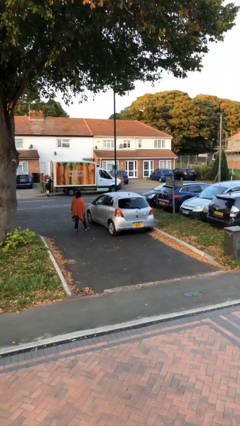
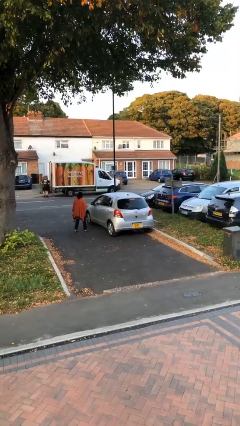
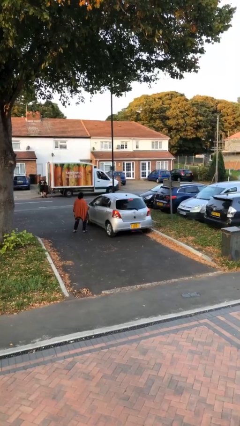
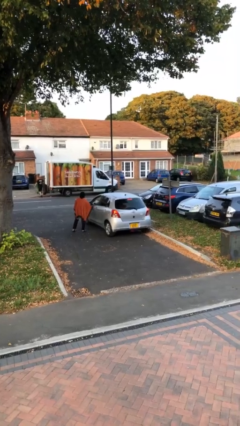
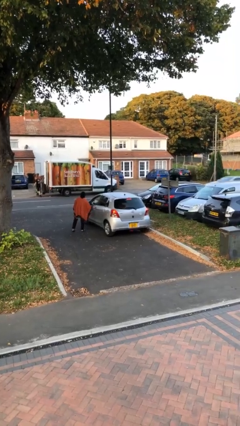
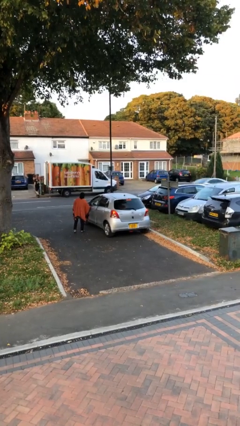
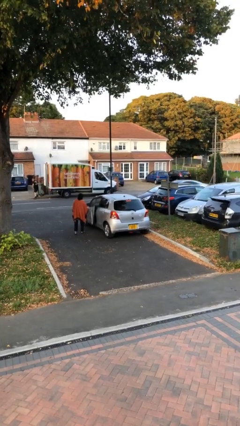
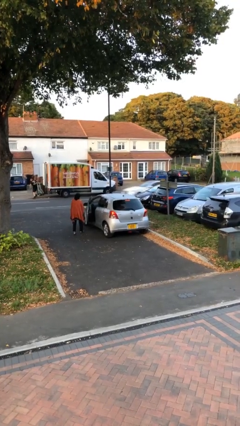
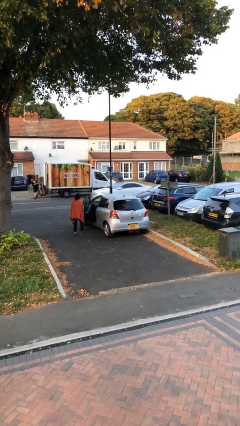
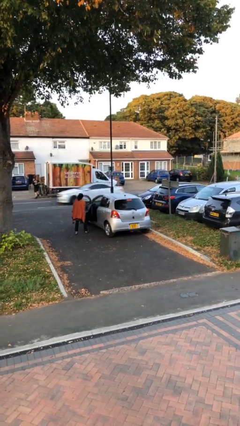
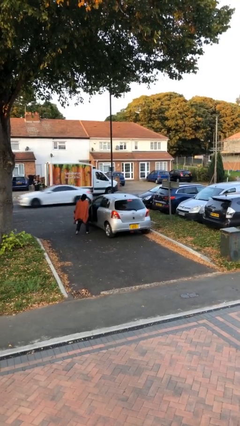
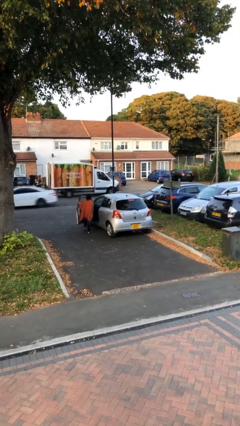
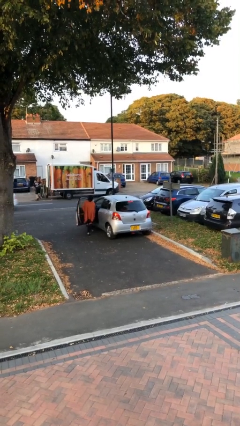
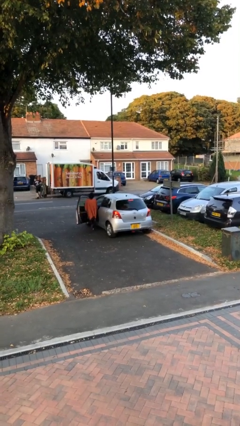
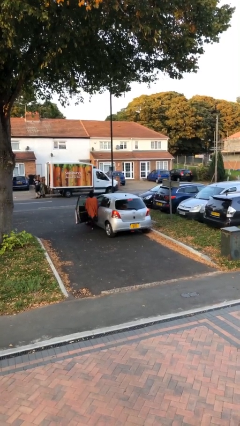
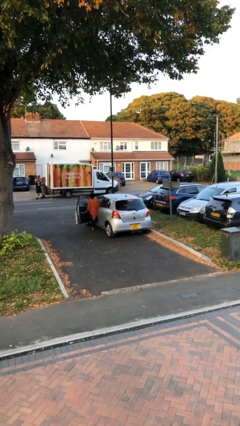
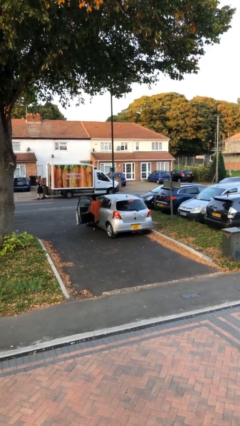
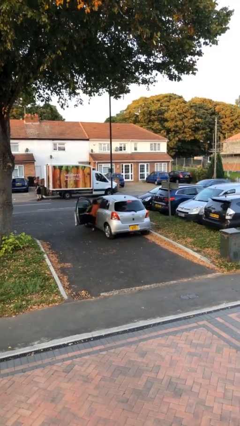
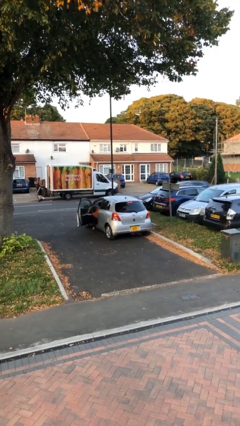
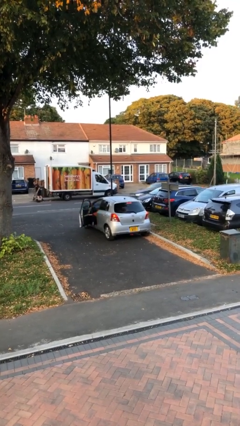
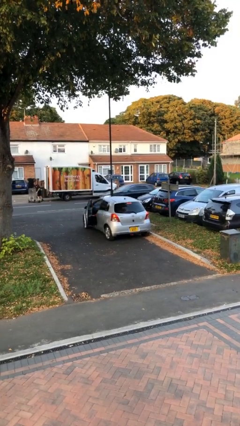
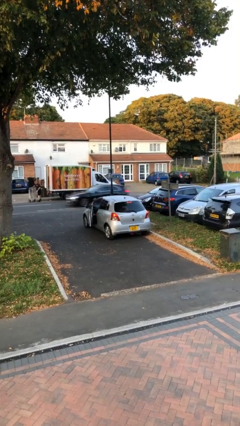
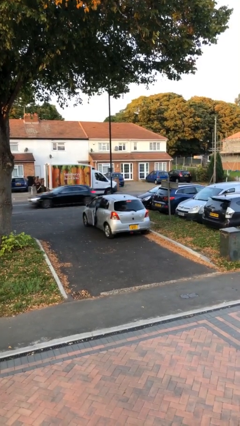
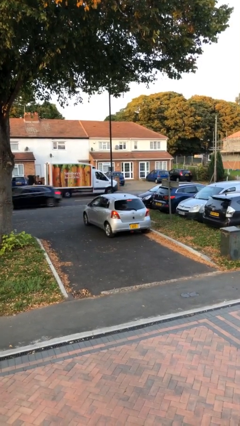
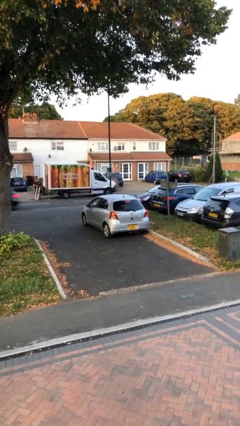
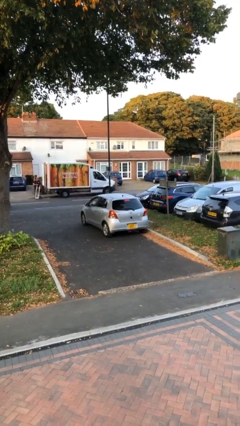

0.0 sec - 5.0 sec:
car picks up person

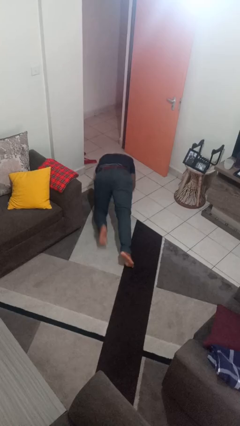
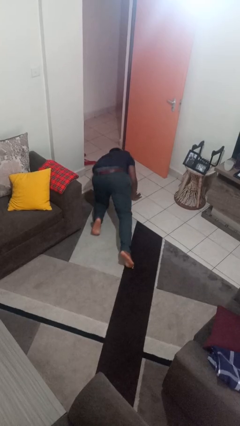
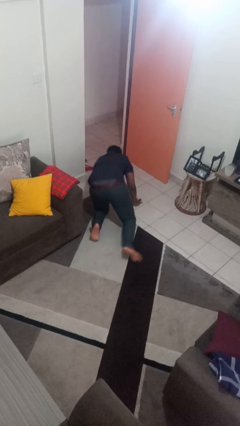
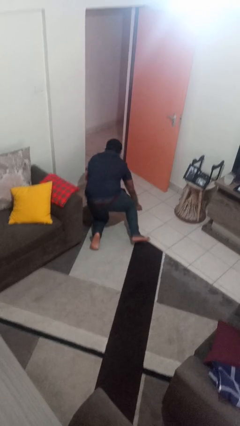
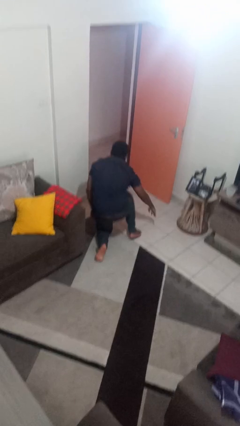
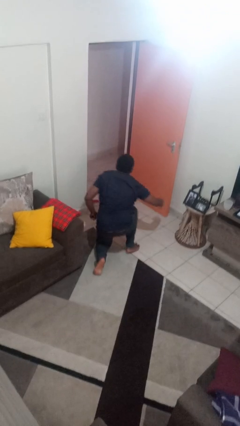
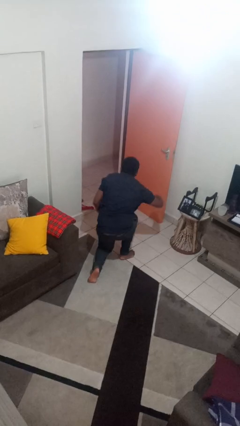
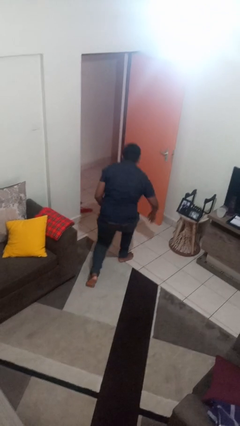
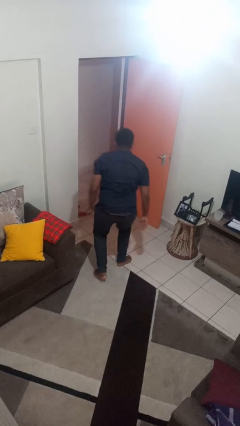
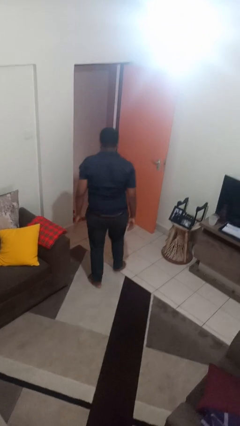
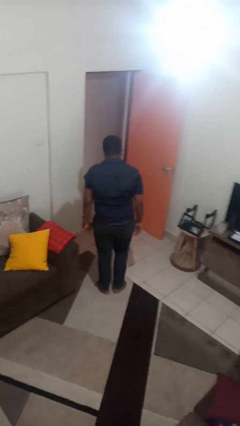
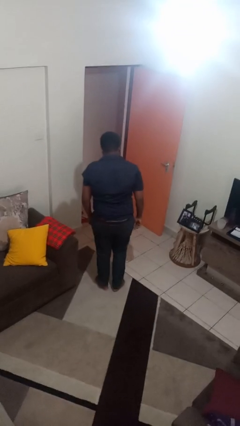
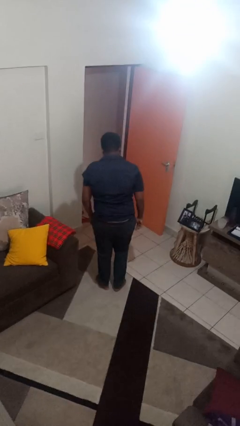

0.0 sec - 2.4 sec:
person stands up from floor

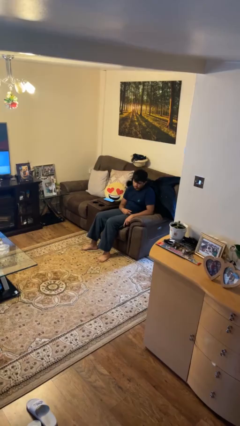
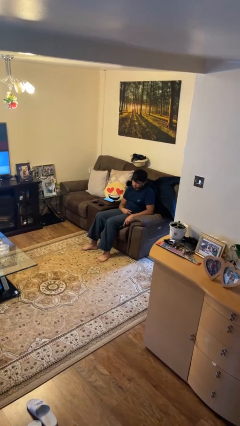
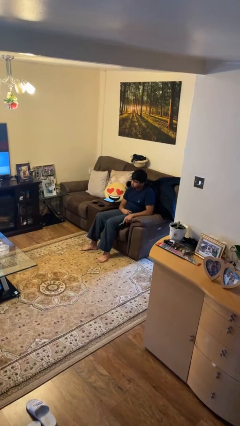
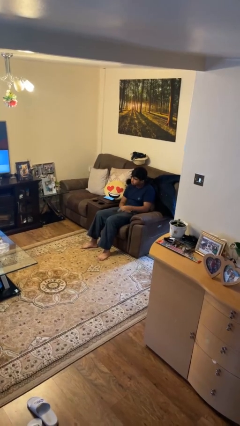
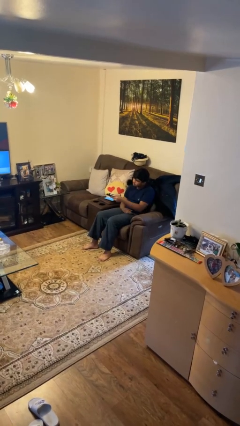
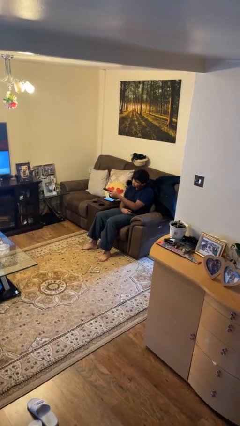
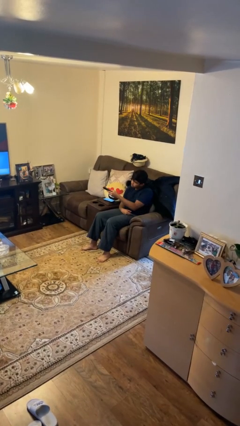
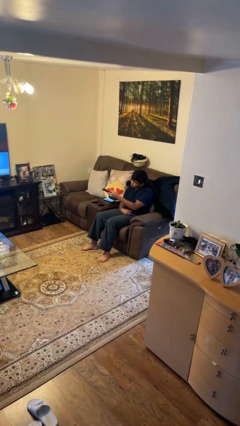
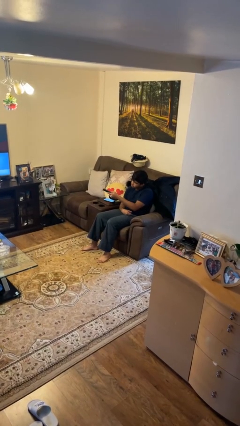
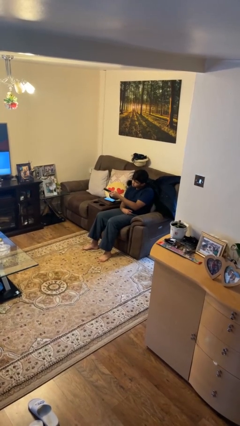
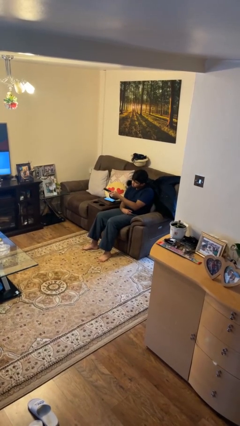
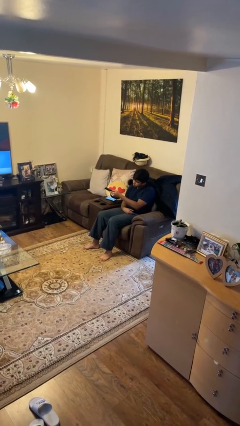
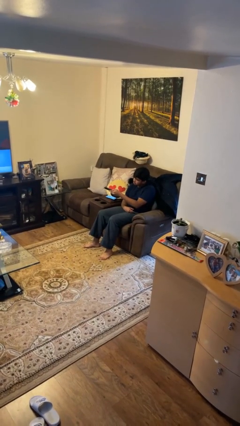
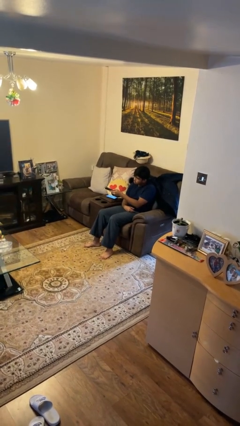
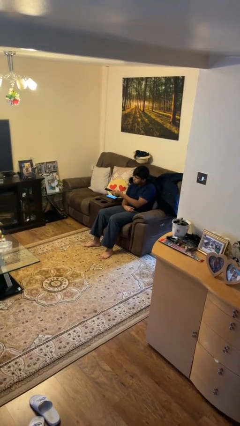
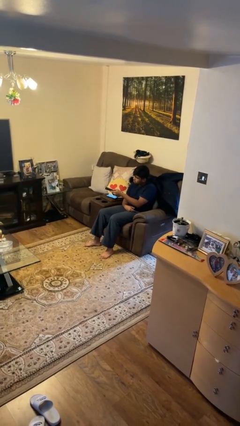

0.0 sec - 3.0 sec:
person uses television remote

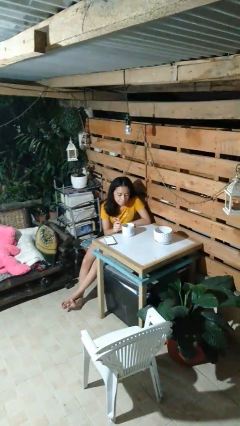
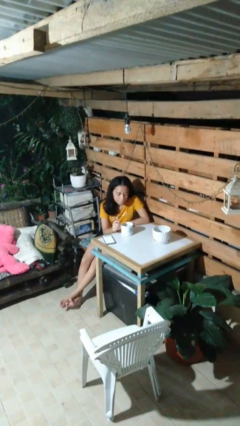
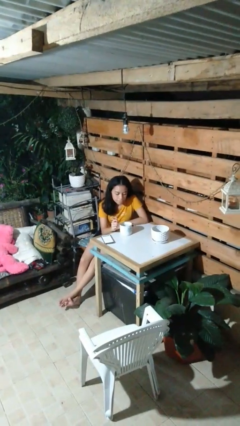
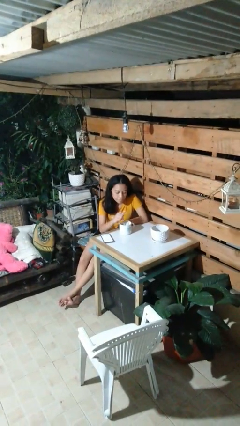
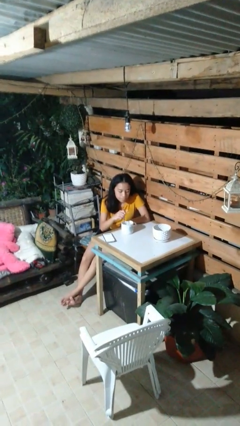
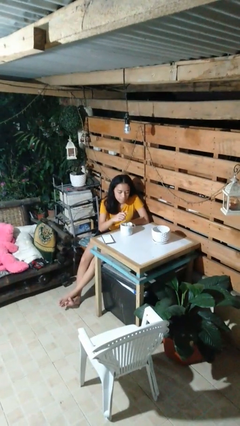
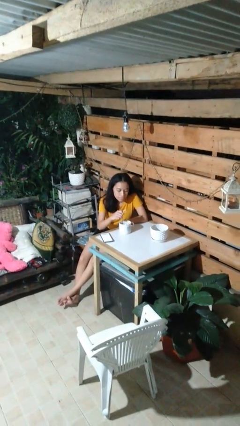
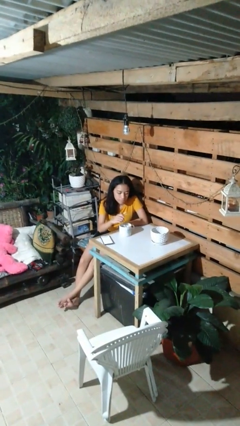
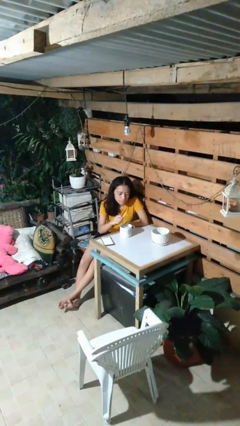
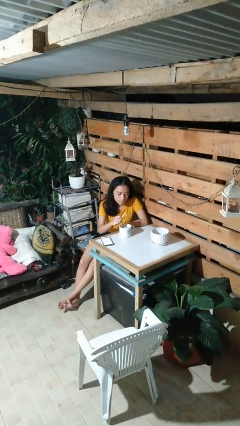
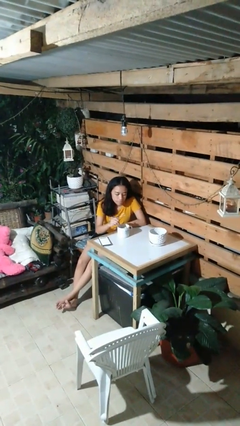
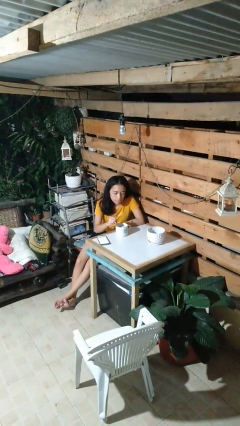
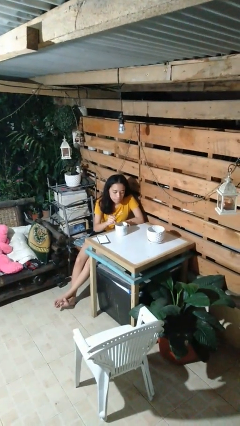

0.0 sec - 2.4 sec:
person stirs mug

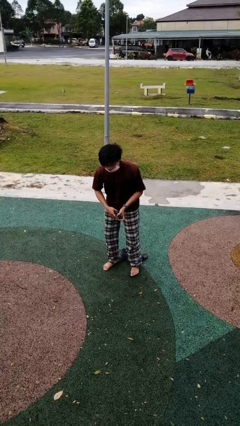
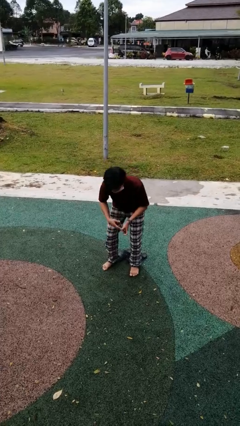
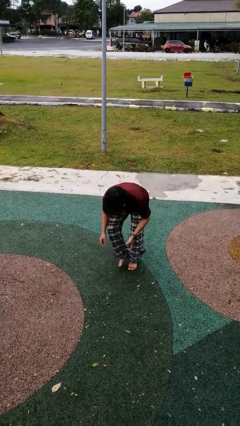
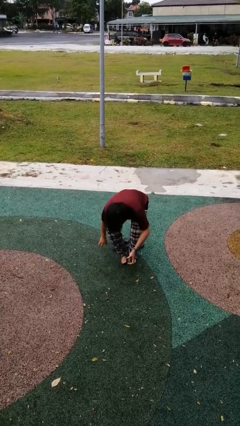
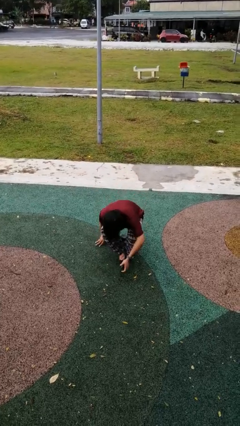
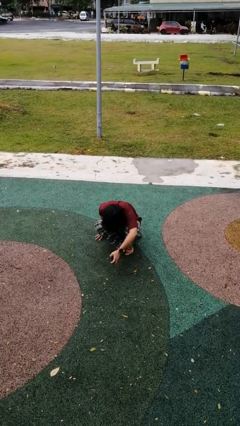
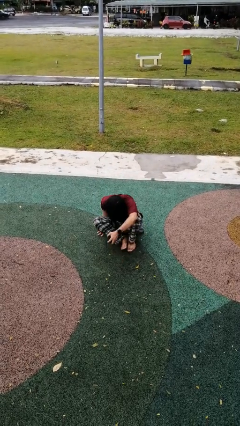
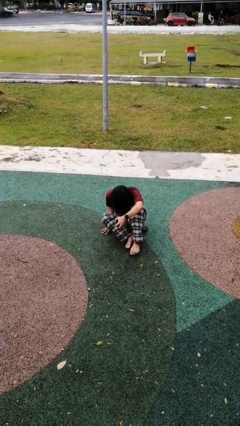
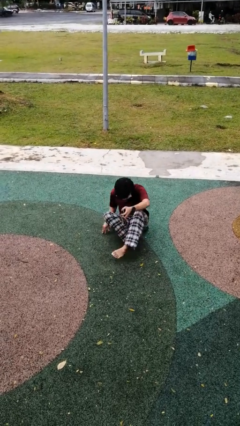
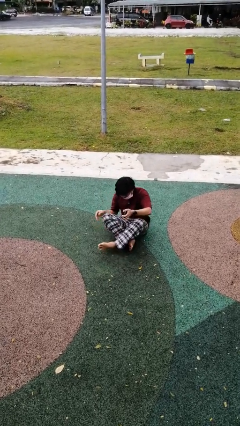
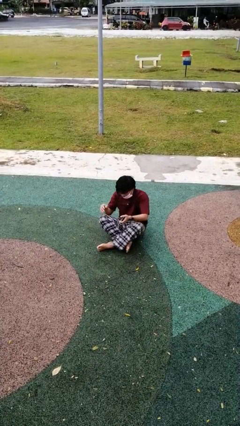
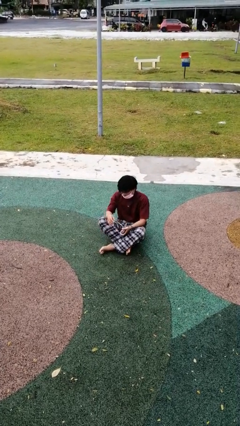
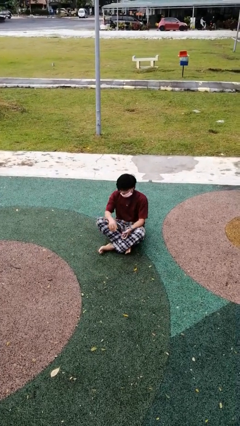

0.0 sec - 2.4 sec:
person sits crisscross

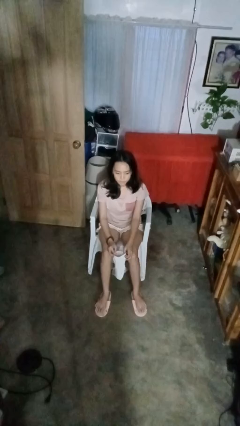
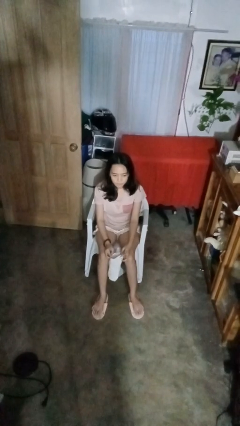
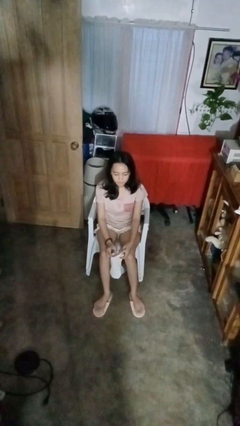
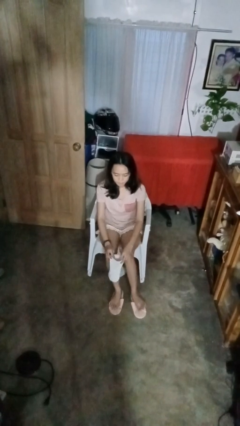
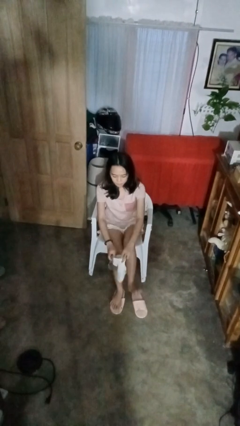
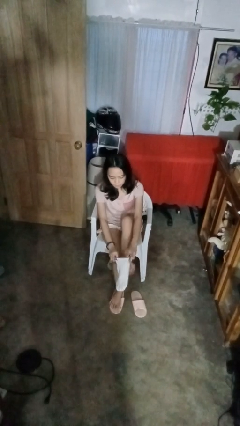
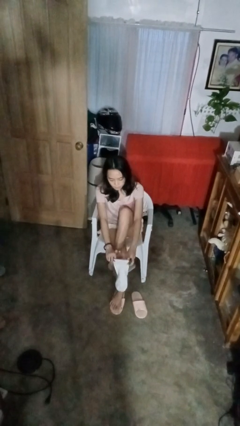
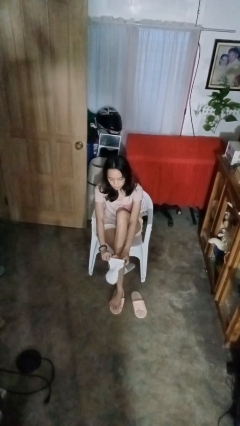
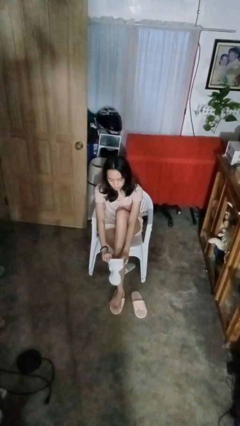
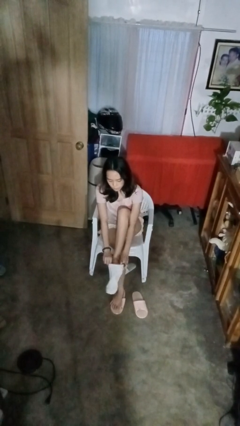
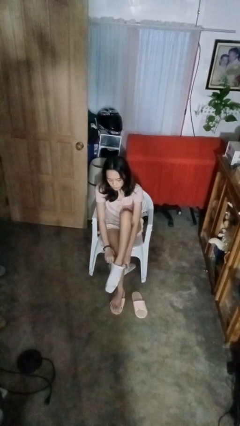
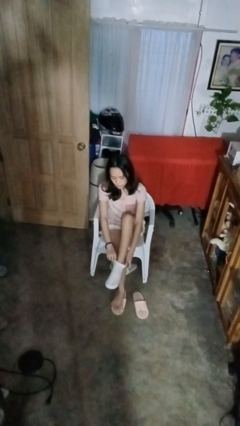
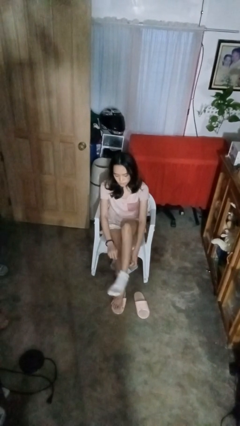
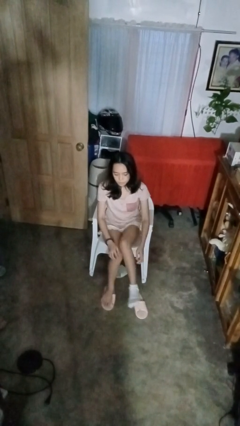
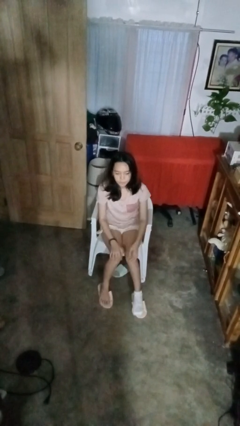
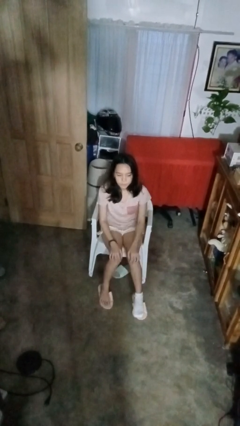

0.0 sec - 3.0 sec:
person puts on socks
